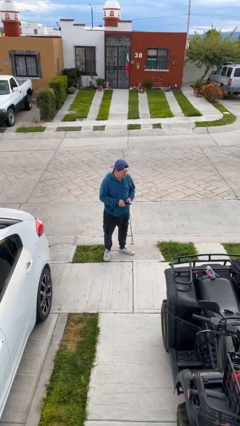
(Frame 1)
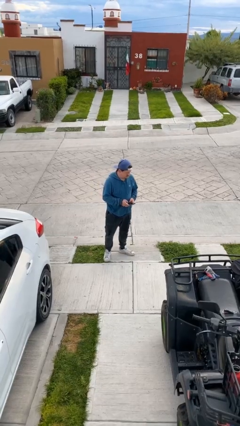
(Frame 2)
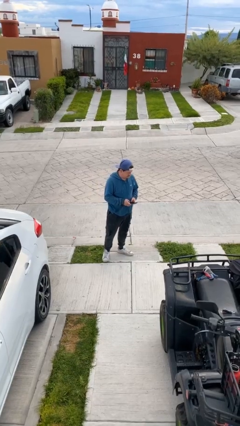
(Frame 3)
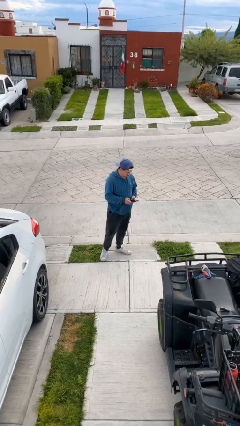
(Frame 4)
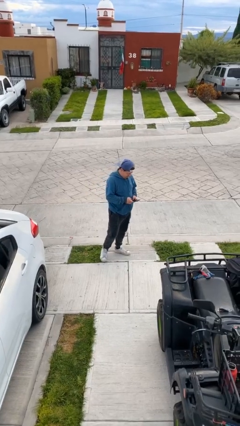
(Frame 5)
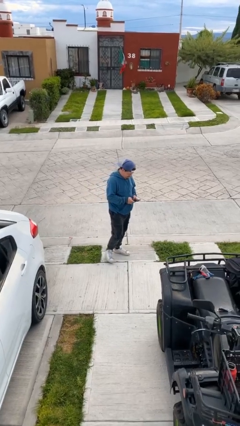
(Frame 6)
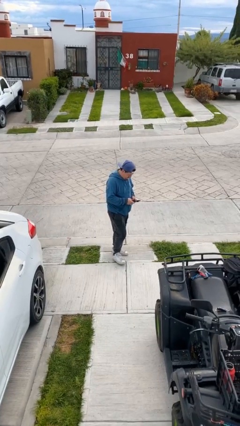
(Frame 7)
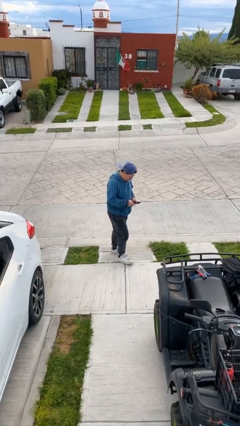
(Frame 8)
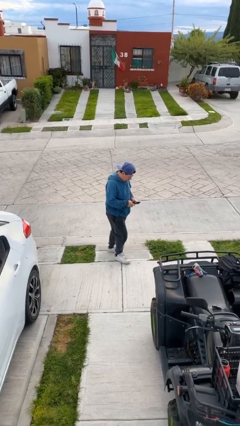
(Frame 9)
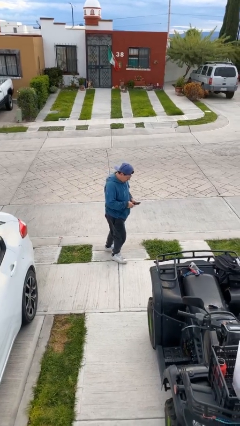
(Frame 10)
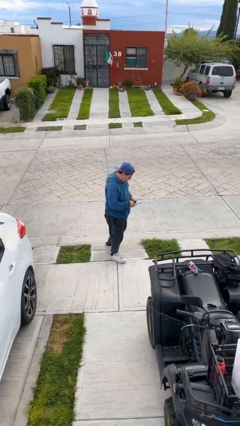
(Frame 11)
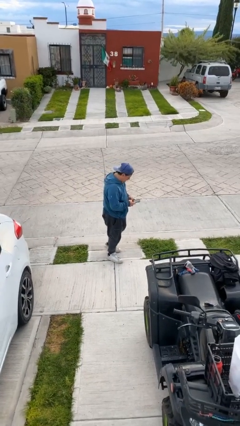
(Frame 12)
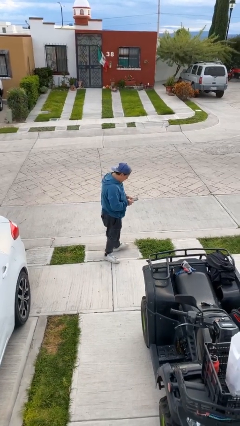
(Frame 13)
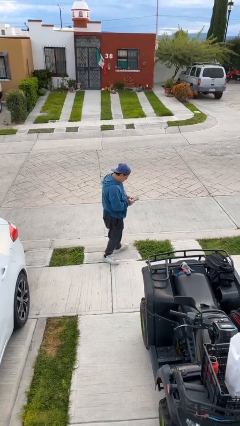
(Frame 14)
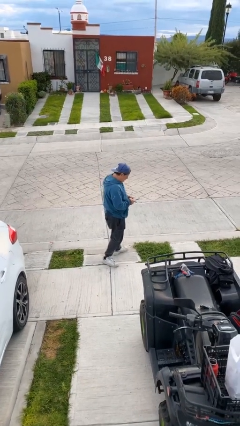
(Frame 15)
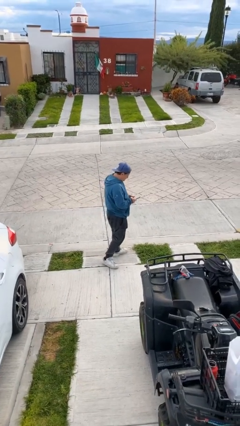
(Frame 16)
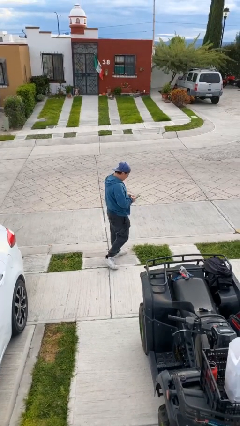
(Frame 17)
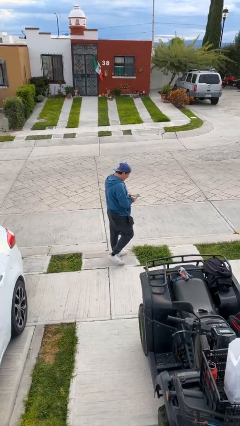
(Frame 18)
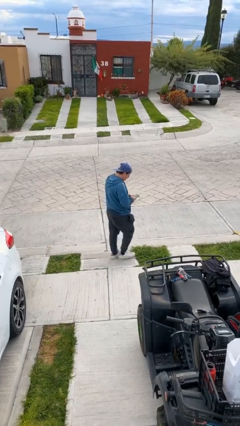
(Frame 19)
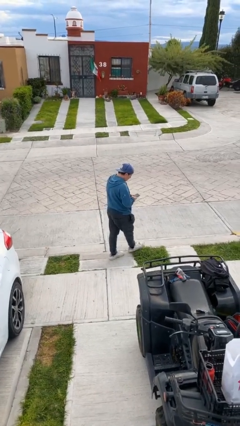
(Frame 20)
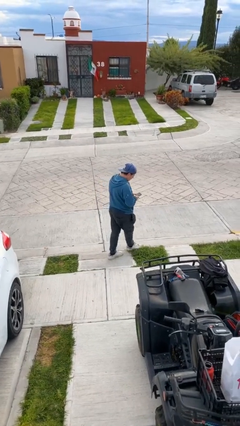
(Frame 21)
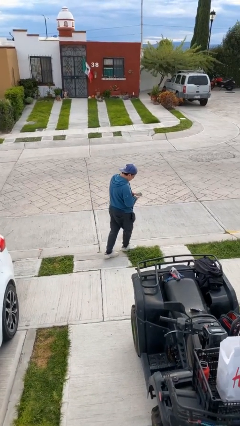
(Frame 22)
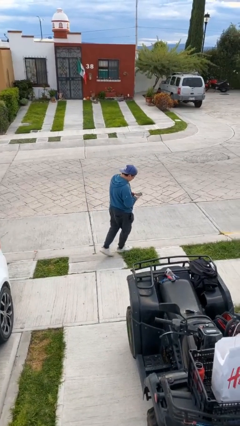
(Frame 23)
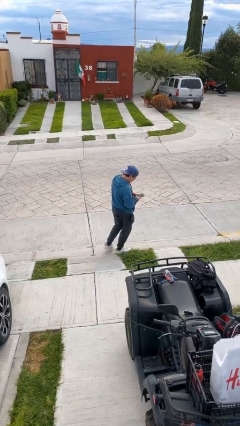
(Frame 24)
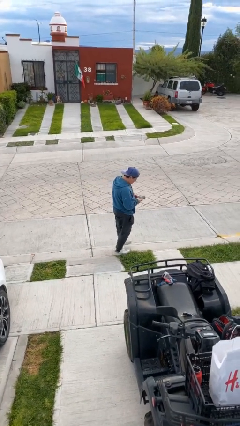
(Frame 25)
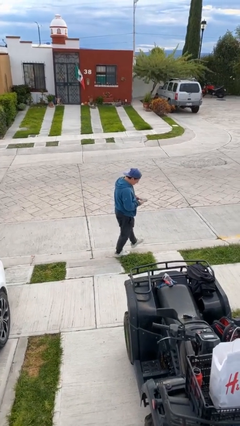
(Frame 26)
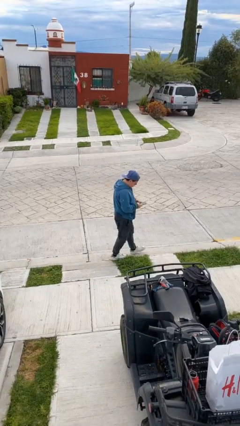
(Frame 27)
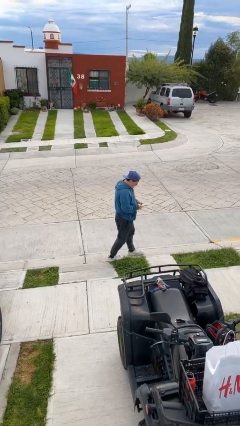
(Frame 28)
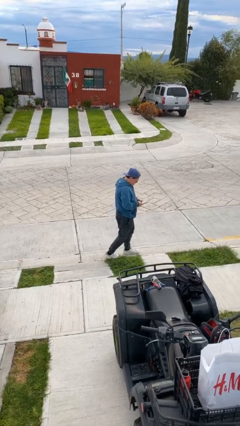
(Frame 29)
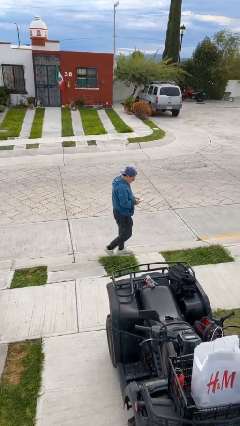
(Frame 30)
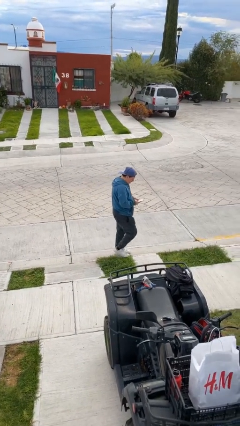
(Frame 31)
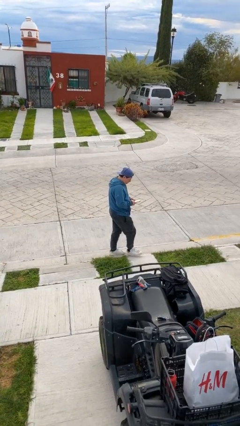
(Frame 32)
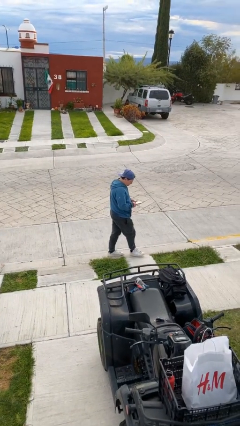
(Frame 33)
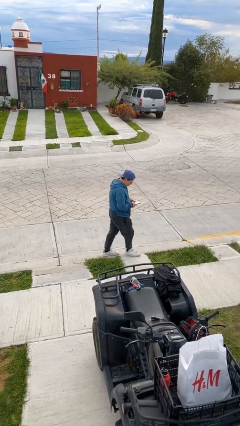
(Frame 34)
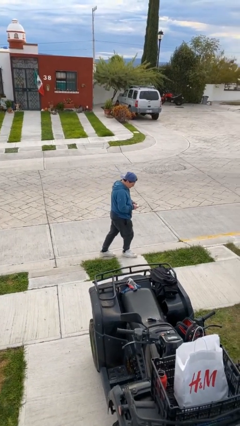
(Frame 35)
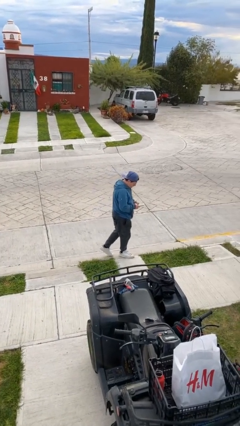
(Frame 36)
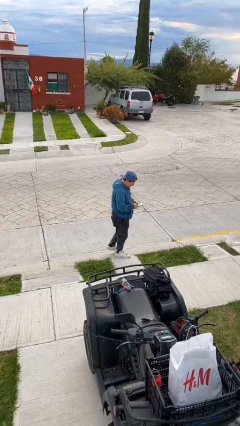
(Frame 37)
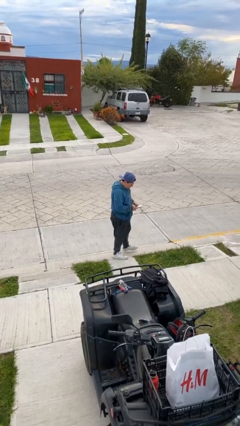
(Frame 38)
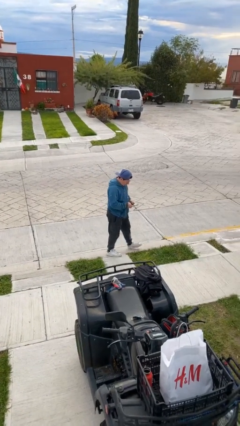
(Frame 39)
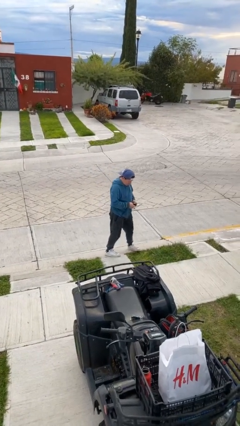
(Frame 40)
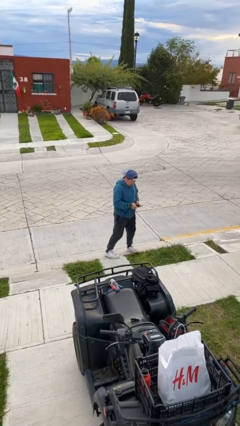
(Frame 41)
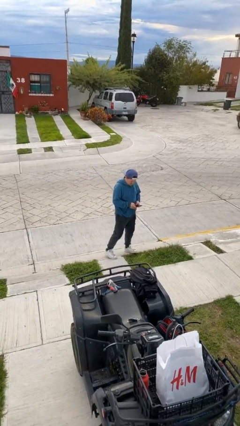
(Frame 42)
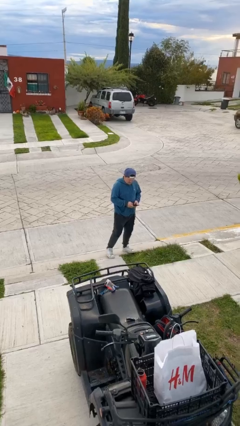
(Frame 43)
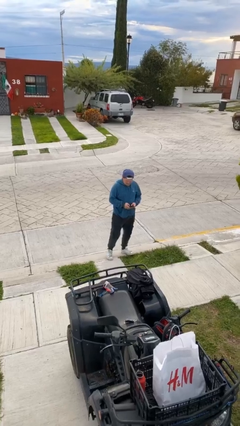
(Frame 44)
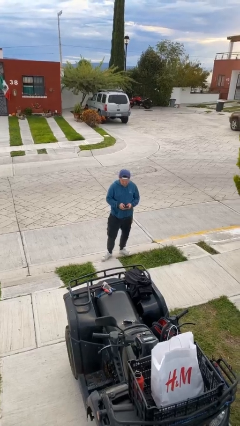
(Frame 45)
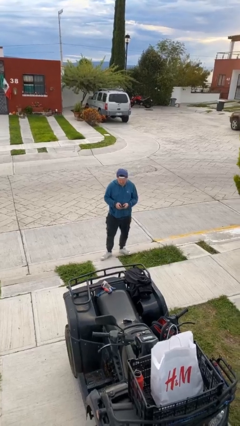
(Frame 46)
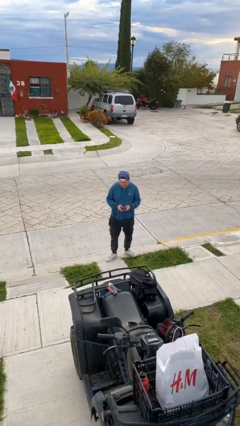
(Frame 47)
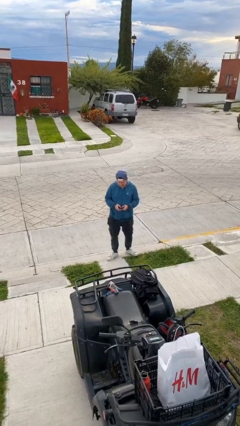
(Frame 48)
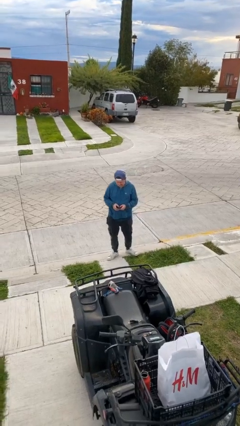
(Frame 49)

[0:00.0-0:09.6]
person texts on phone

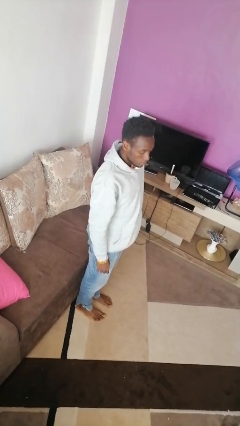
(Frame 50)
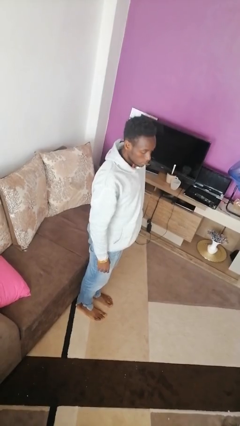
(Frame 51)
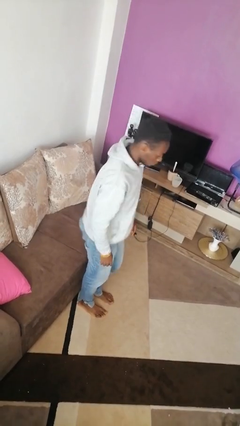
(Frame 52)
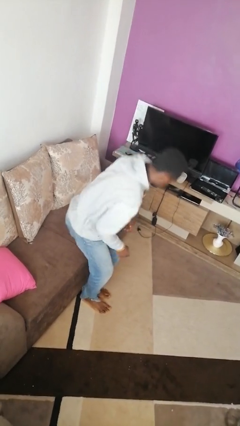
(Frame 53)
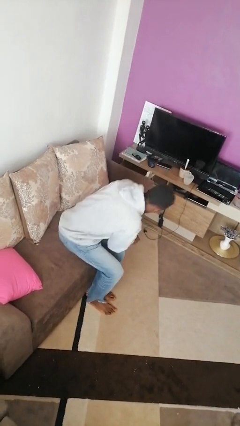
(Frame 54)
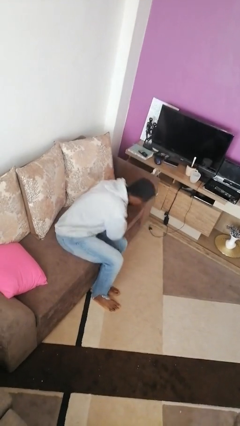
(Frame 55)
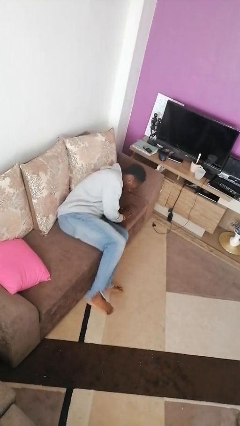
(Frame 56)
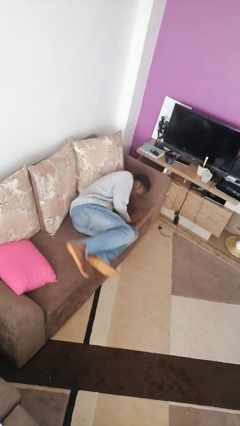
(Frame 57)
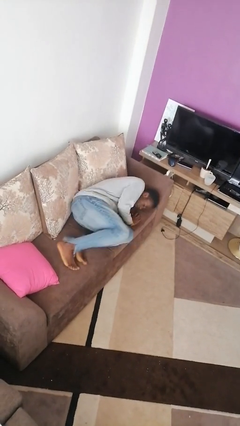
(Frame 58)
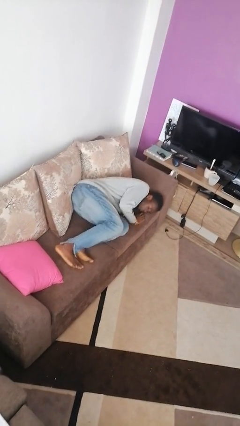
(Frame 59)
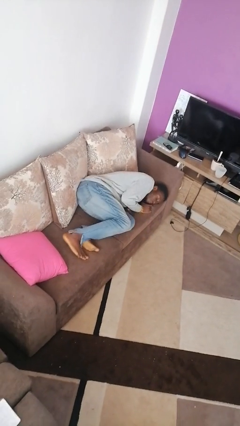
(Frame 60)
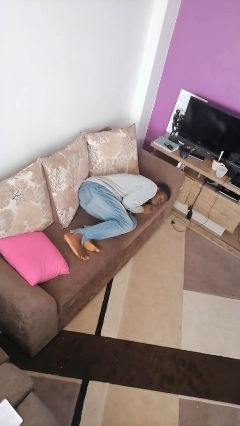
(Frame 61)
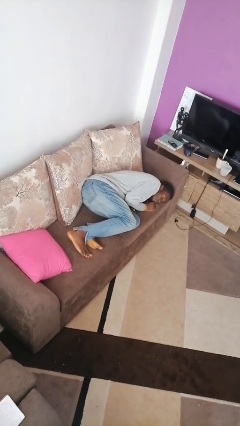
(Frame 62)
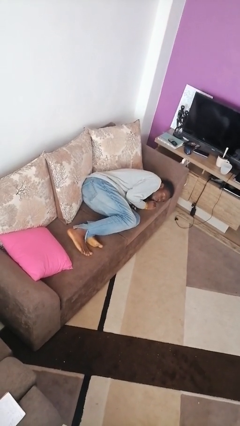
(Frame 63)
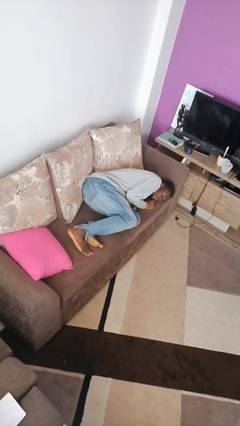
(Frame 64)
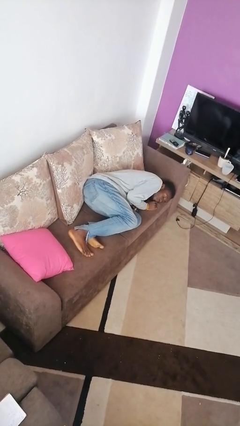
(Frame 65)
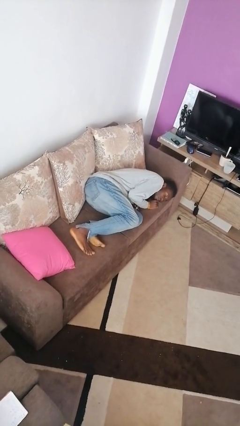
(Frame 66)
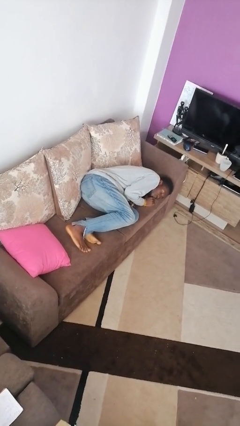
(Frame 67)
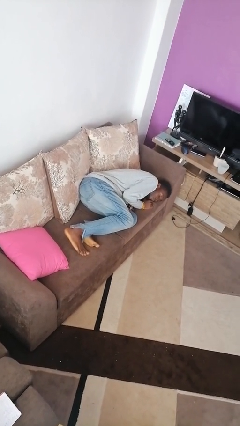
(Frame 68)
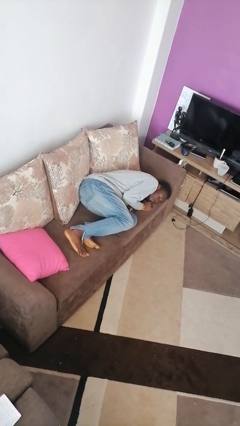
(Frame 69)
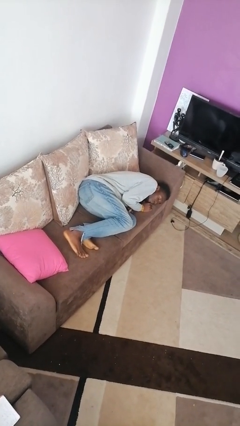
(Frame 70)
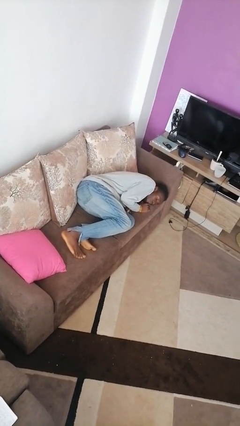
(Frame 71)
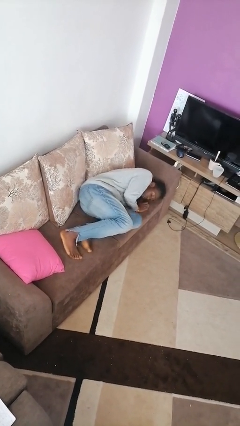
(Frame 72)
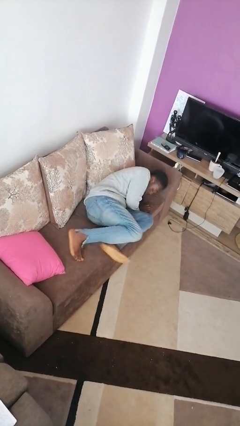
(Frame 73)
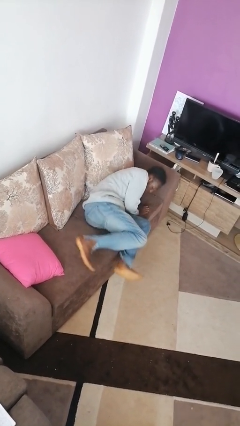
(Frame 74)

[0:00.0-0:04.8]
person lies down on couch

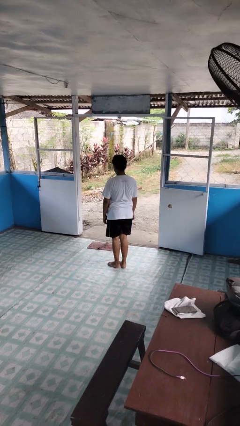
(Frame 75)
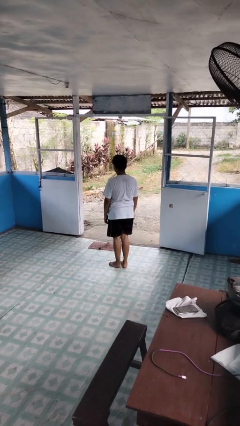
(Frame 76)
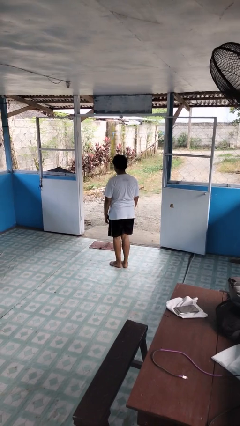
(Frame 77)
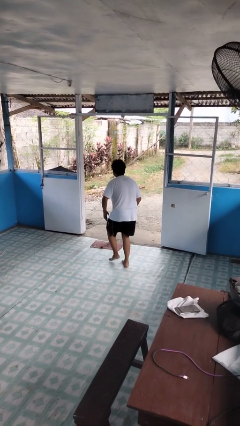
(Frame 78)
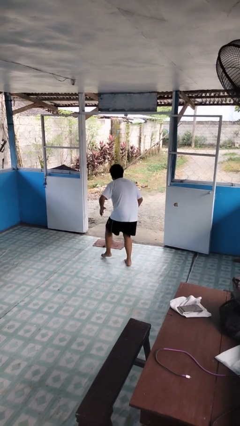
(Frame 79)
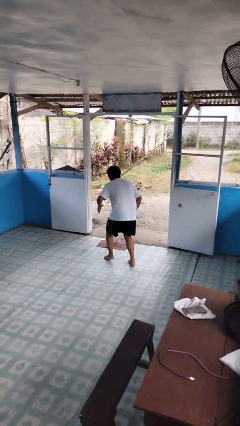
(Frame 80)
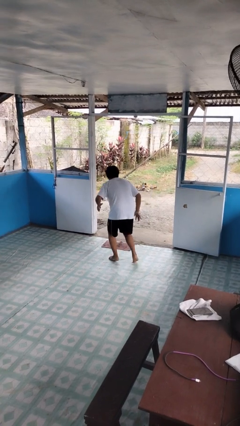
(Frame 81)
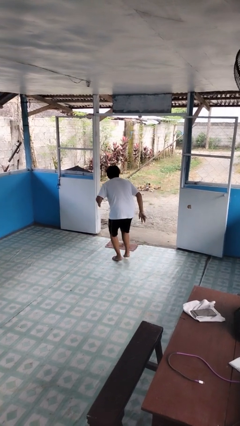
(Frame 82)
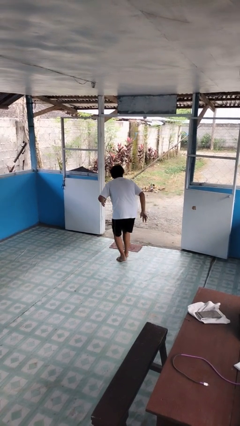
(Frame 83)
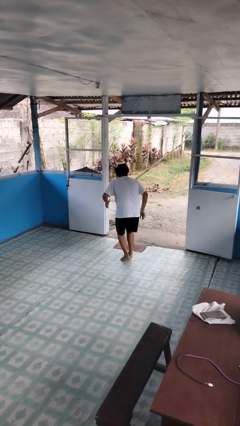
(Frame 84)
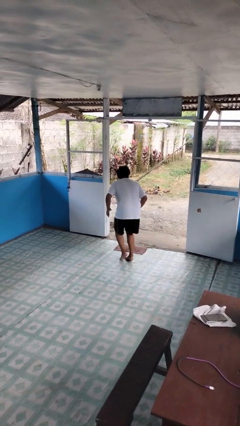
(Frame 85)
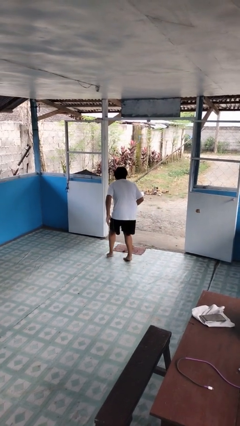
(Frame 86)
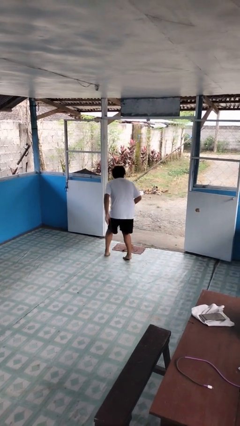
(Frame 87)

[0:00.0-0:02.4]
person walks tiptoe

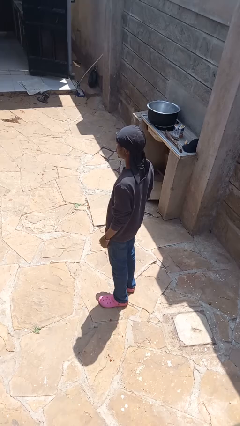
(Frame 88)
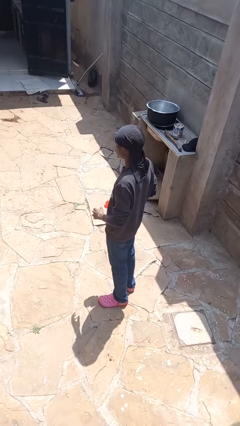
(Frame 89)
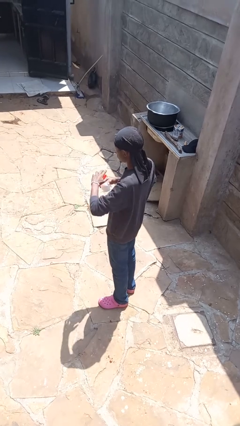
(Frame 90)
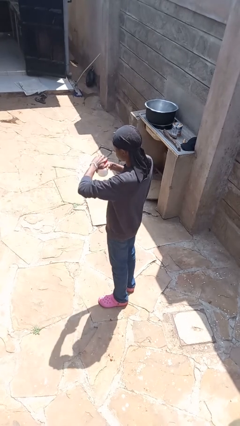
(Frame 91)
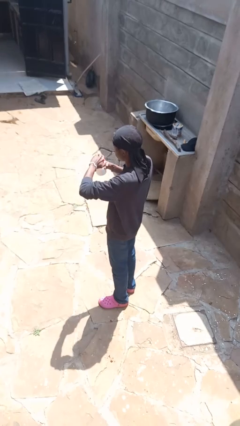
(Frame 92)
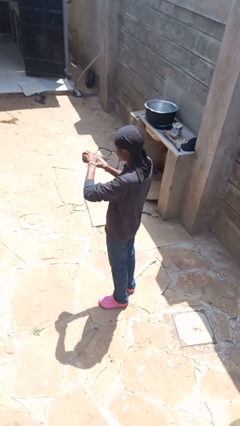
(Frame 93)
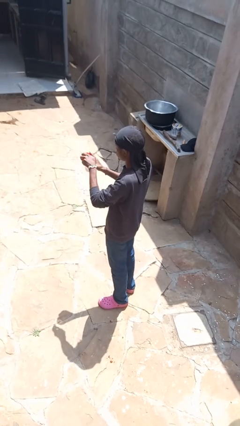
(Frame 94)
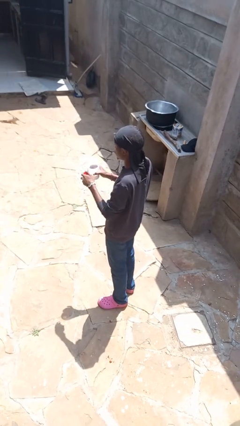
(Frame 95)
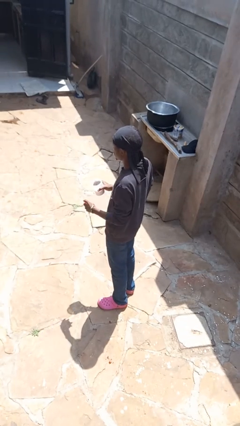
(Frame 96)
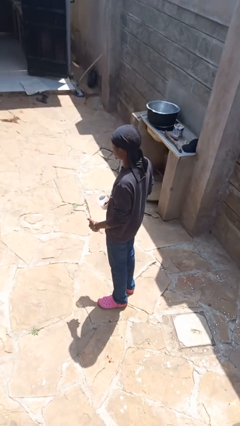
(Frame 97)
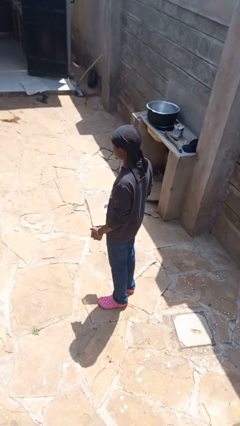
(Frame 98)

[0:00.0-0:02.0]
person opens jar
